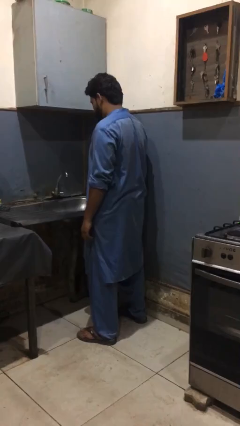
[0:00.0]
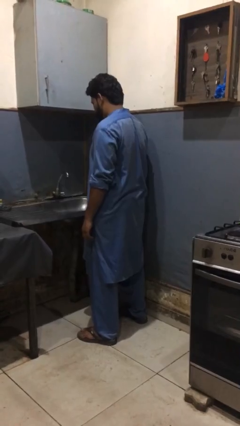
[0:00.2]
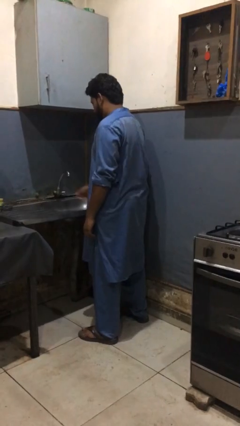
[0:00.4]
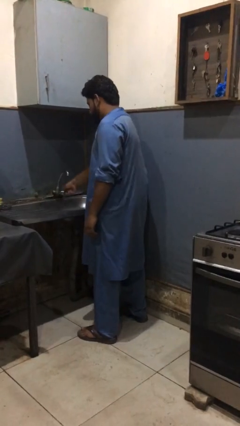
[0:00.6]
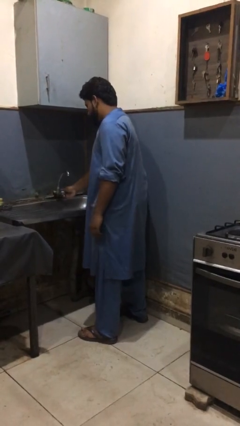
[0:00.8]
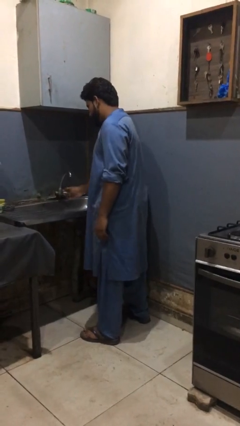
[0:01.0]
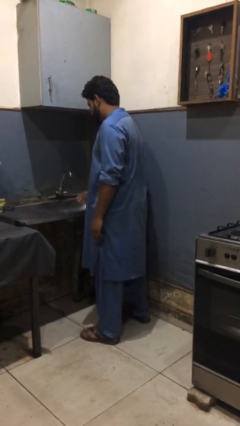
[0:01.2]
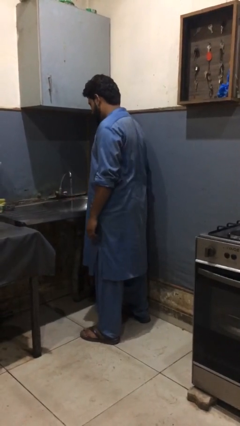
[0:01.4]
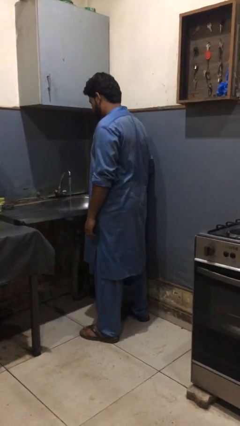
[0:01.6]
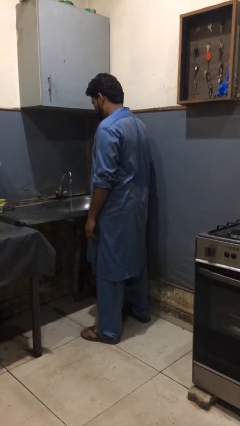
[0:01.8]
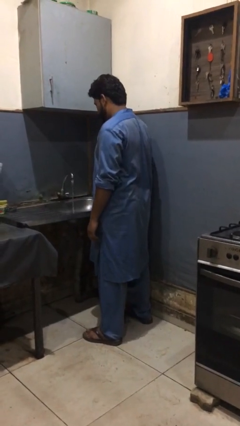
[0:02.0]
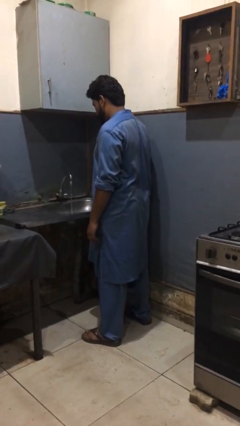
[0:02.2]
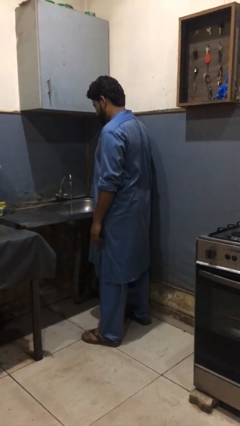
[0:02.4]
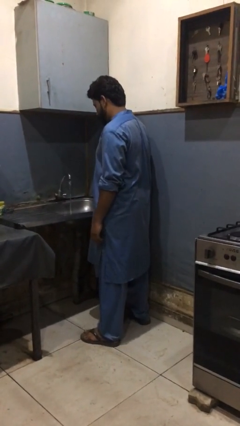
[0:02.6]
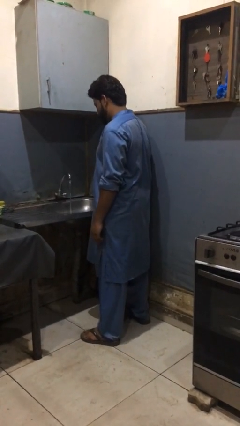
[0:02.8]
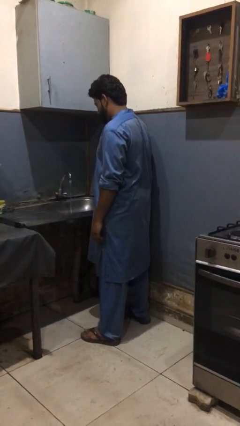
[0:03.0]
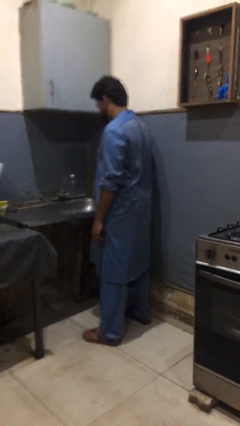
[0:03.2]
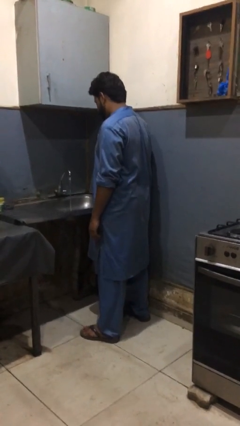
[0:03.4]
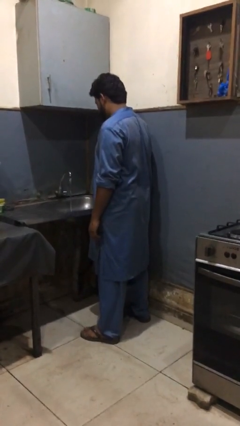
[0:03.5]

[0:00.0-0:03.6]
person turns on faucet

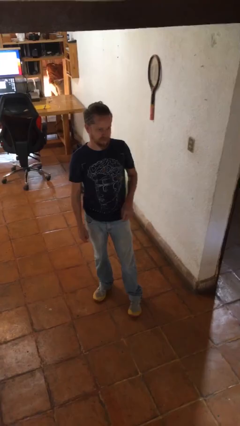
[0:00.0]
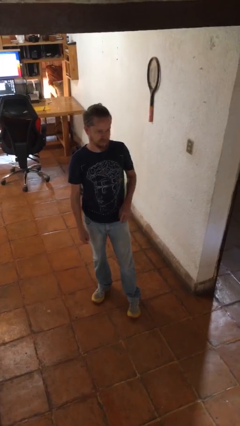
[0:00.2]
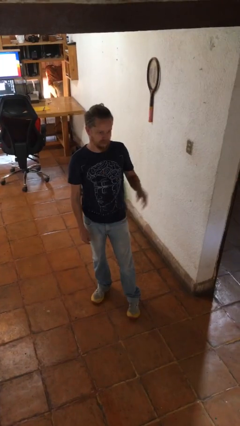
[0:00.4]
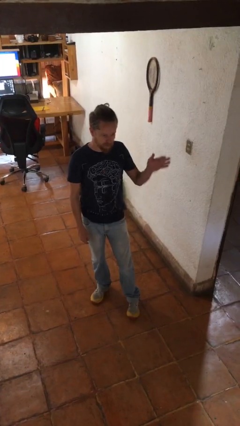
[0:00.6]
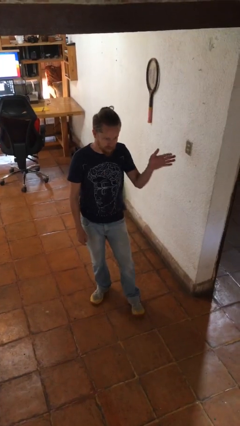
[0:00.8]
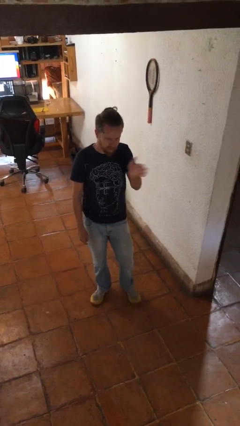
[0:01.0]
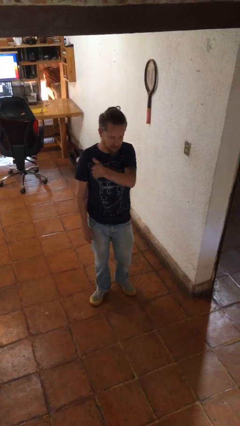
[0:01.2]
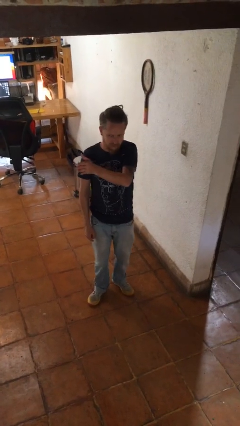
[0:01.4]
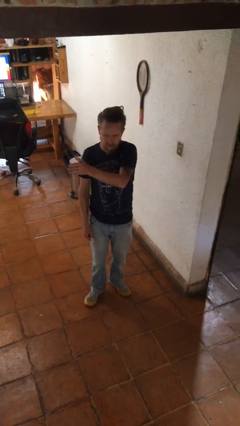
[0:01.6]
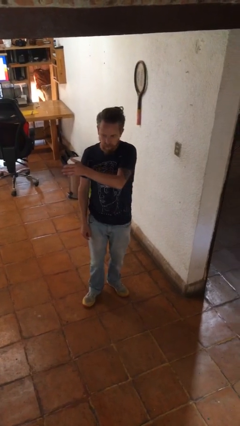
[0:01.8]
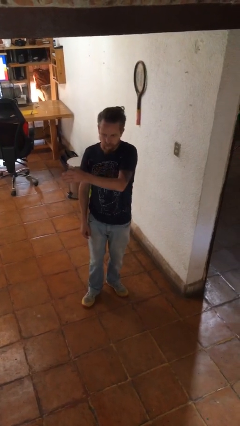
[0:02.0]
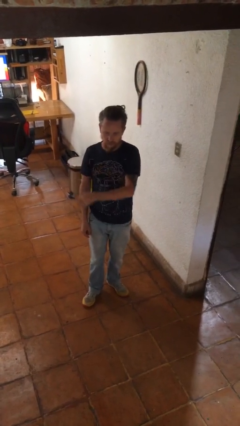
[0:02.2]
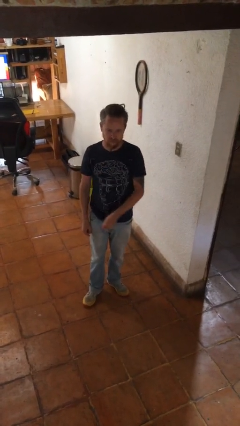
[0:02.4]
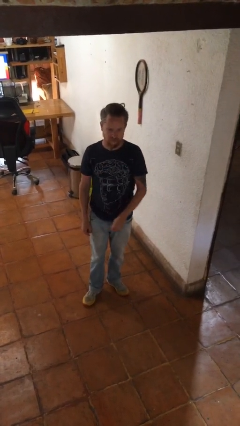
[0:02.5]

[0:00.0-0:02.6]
person gestures swipe right

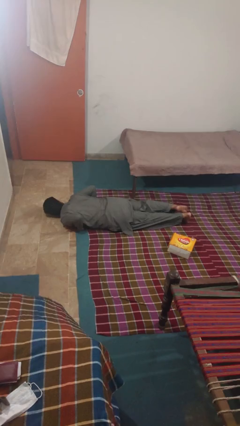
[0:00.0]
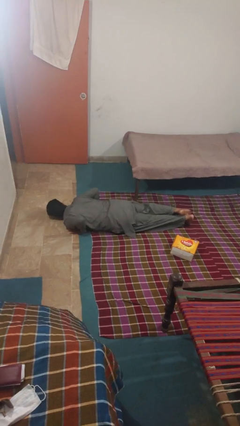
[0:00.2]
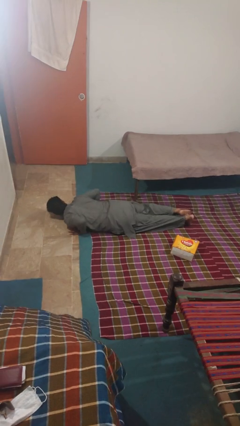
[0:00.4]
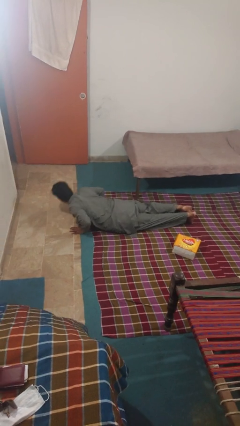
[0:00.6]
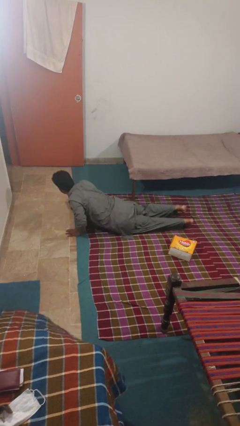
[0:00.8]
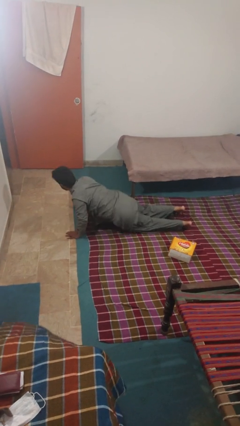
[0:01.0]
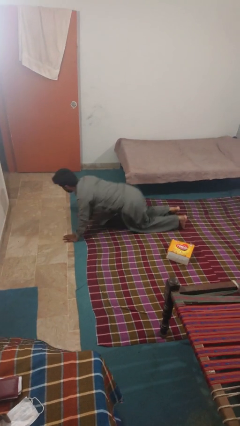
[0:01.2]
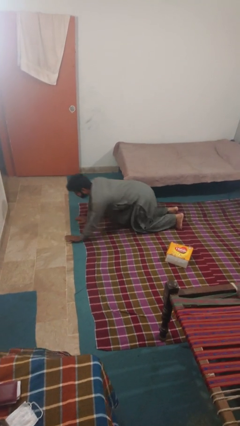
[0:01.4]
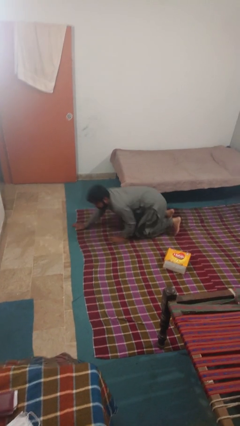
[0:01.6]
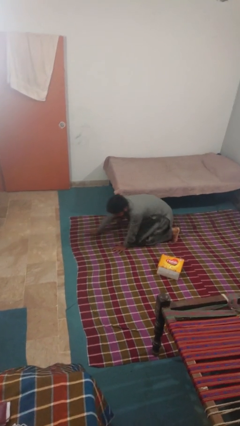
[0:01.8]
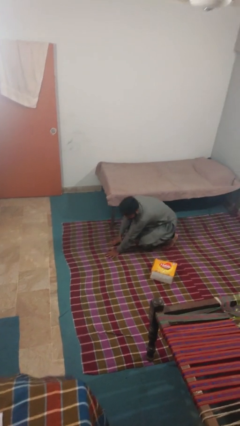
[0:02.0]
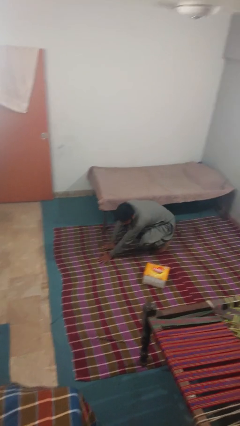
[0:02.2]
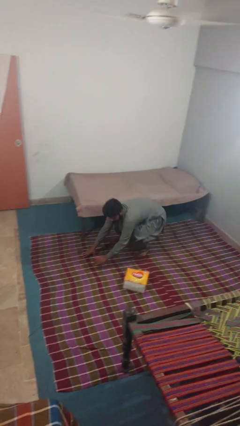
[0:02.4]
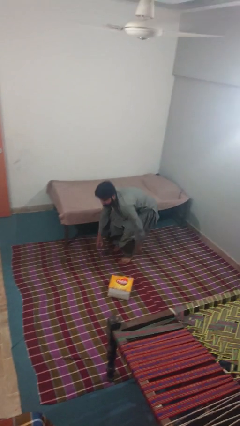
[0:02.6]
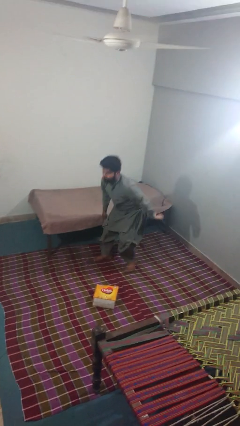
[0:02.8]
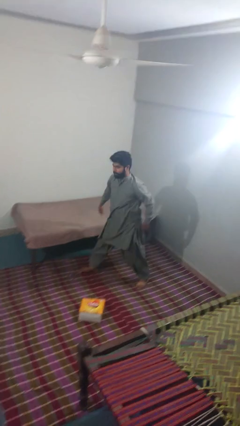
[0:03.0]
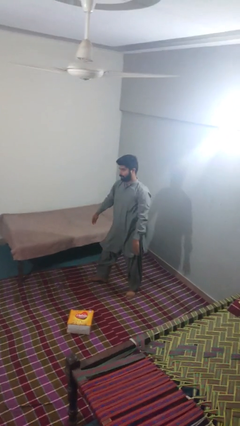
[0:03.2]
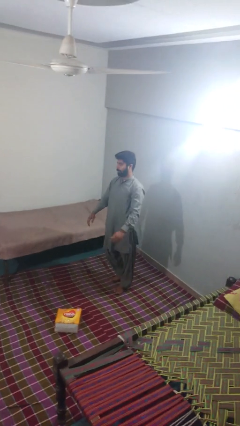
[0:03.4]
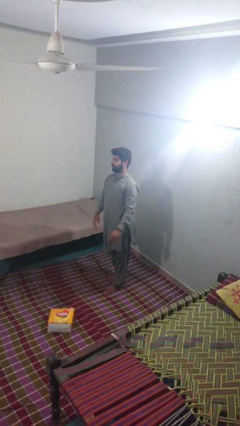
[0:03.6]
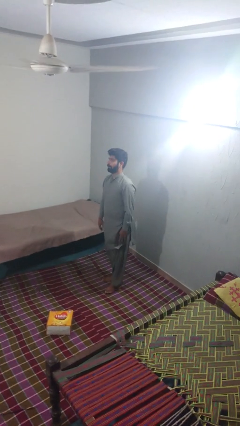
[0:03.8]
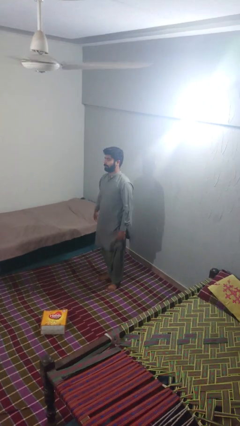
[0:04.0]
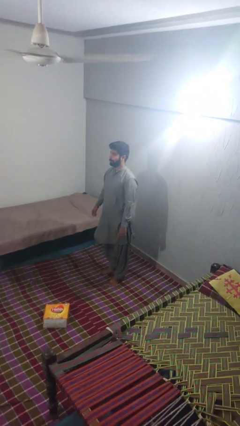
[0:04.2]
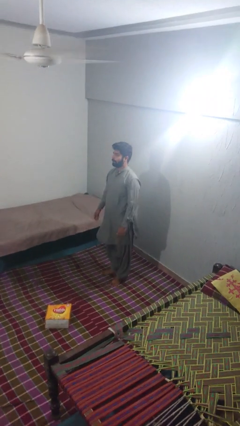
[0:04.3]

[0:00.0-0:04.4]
person stands up from floor

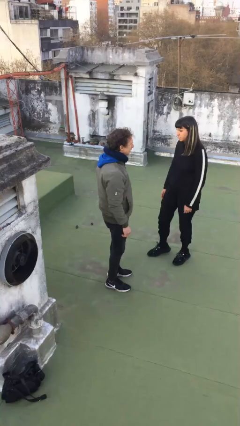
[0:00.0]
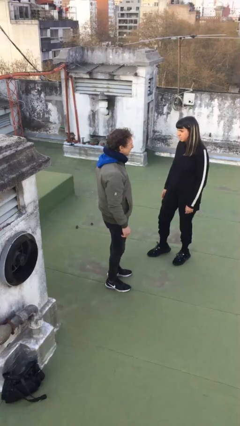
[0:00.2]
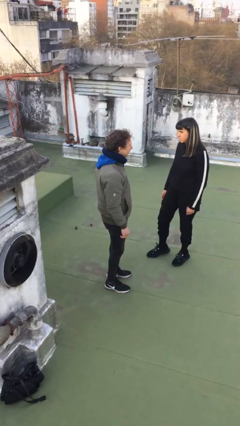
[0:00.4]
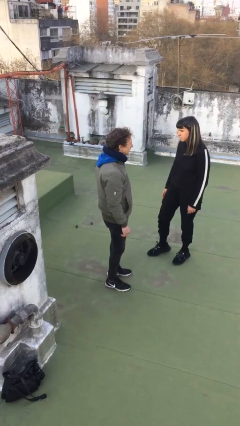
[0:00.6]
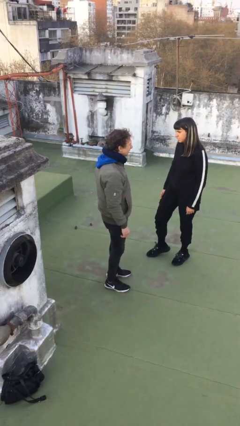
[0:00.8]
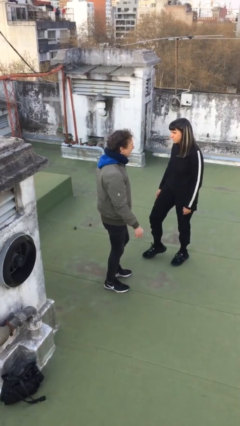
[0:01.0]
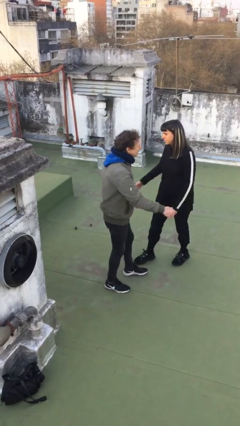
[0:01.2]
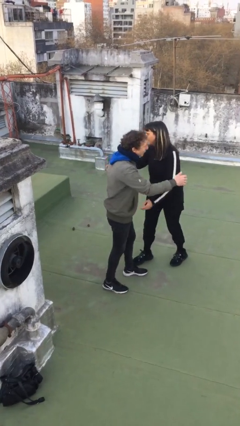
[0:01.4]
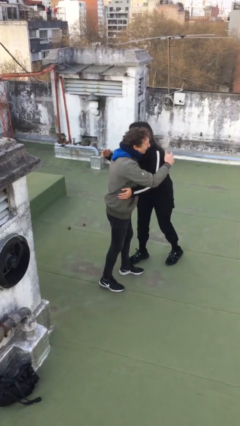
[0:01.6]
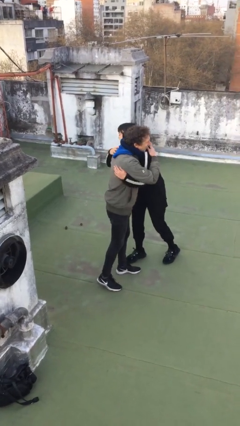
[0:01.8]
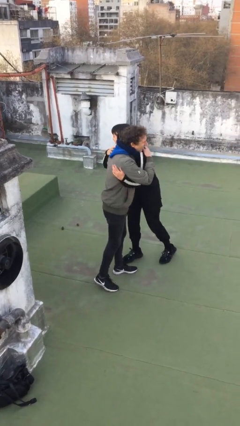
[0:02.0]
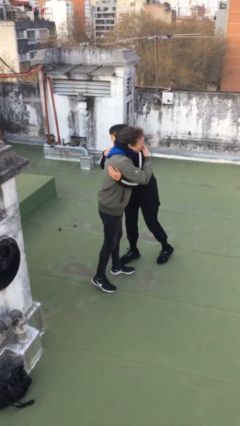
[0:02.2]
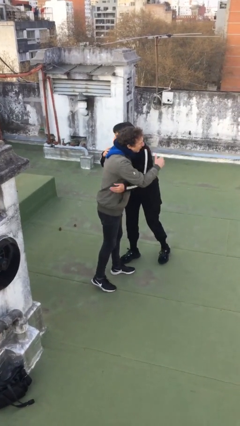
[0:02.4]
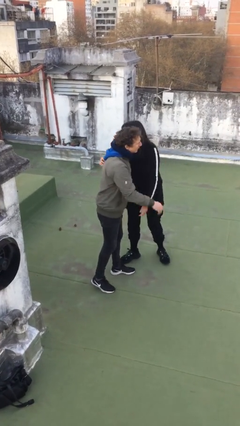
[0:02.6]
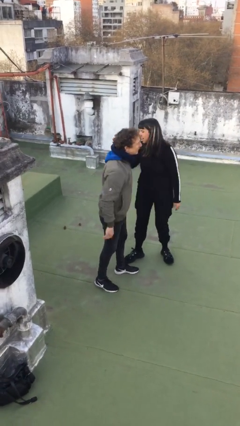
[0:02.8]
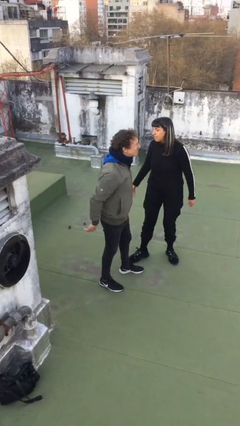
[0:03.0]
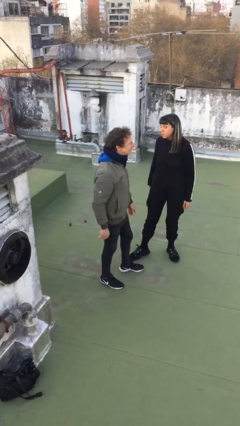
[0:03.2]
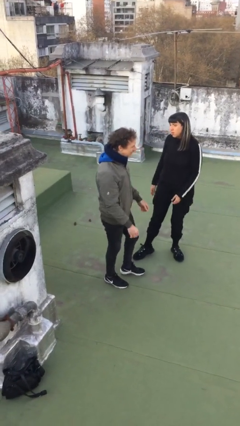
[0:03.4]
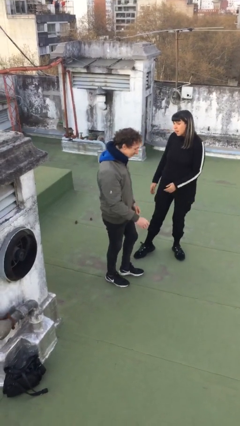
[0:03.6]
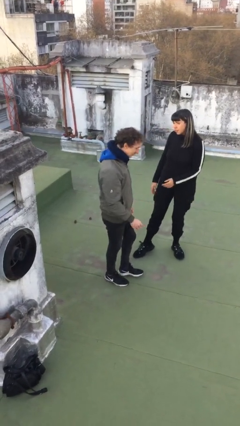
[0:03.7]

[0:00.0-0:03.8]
person embraces person

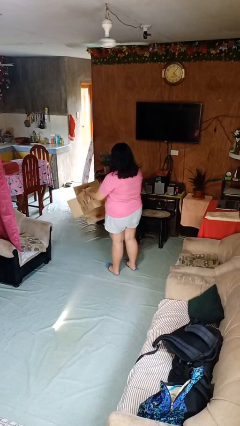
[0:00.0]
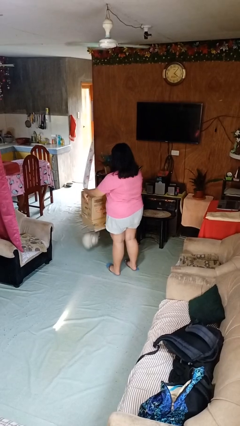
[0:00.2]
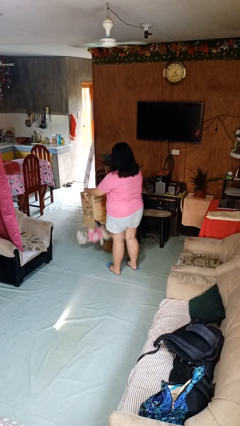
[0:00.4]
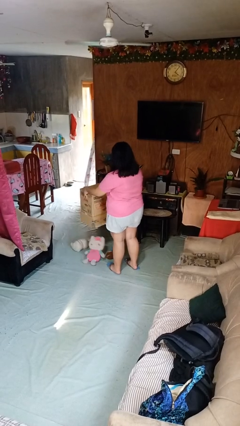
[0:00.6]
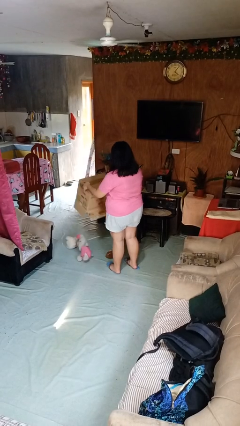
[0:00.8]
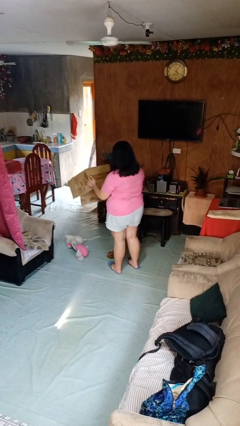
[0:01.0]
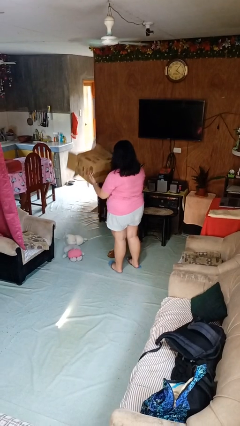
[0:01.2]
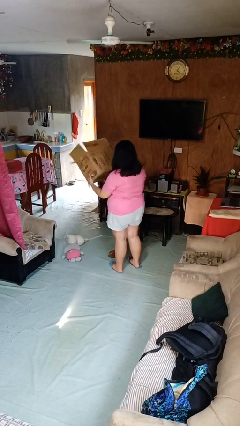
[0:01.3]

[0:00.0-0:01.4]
person unloads box onto floor

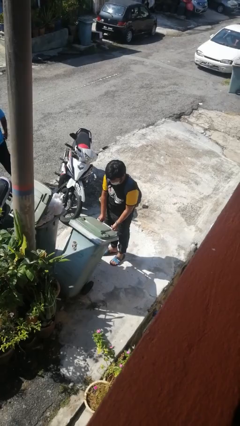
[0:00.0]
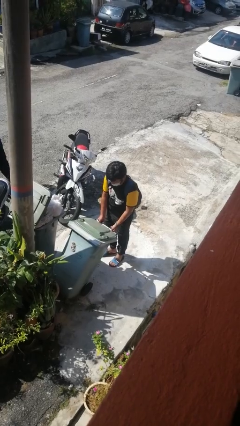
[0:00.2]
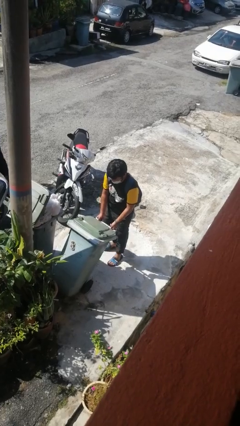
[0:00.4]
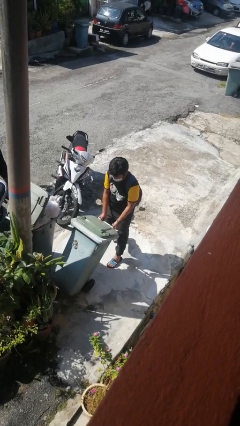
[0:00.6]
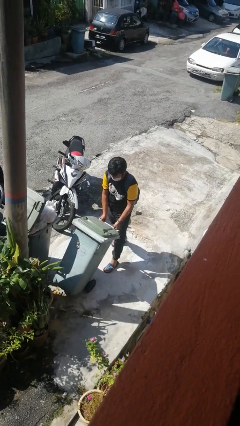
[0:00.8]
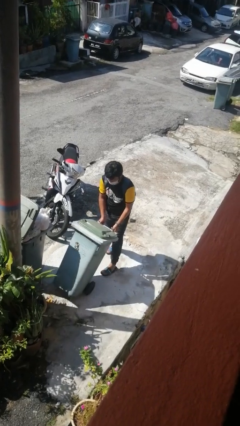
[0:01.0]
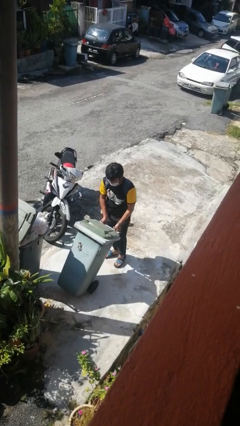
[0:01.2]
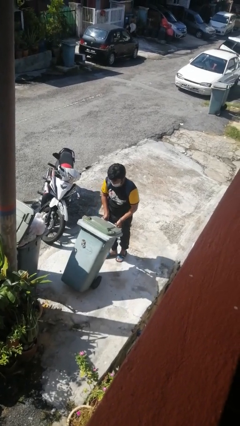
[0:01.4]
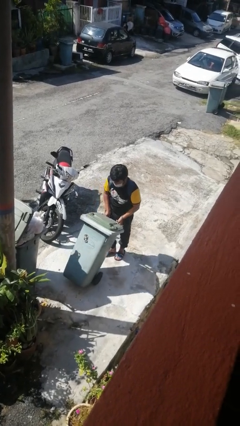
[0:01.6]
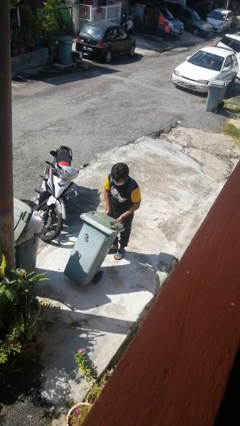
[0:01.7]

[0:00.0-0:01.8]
person pulls wheeled trashcan
